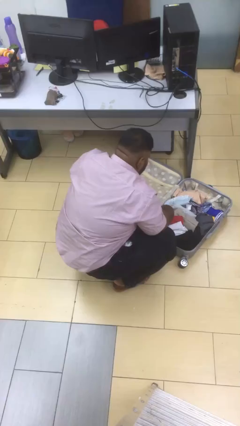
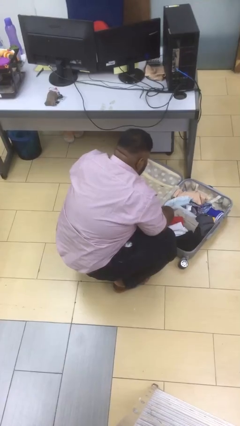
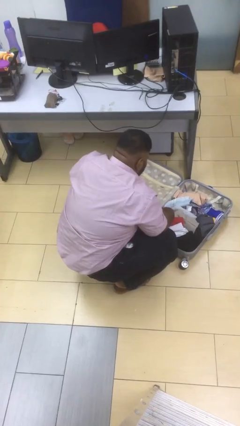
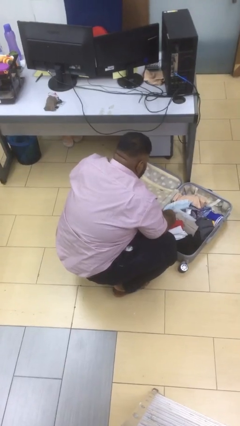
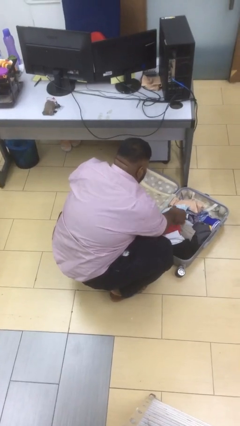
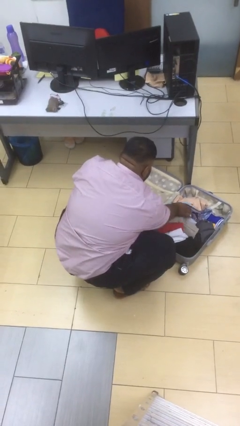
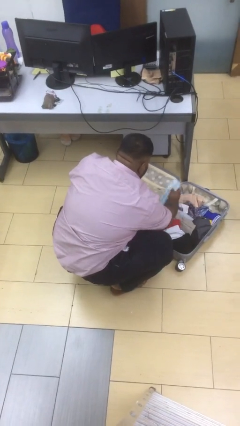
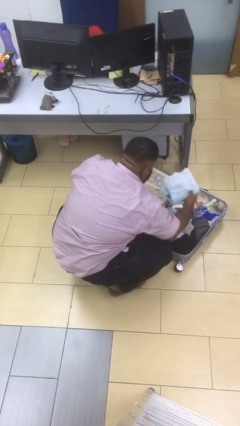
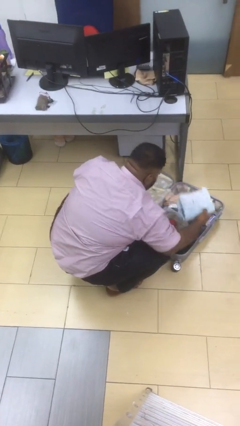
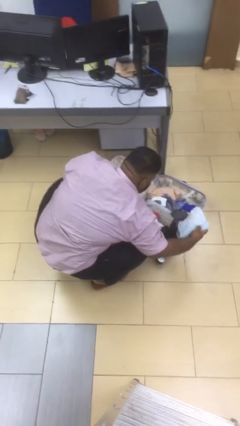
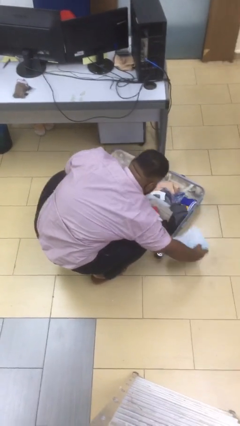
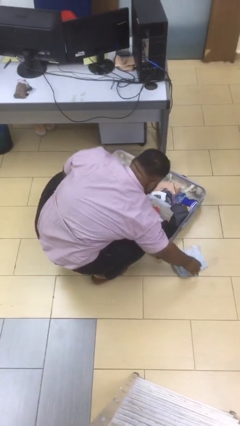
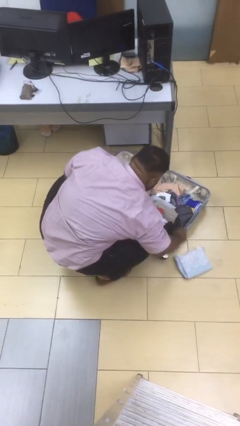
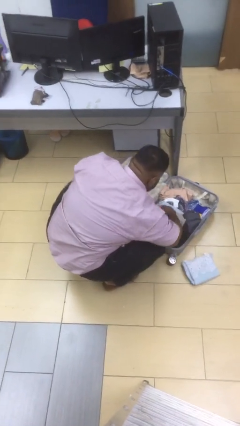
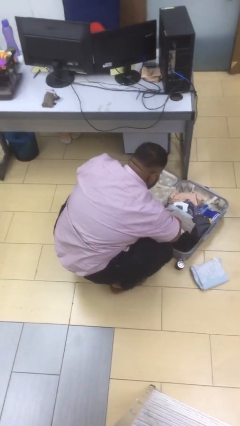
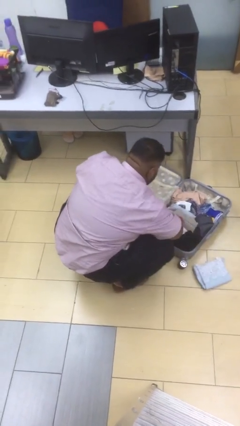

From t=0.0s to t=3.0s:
person unloads clothes from suitcase

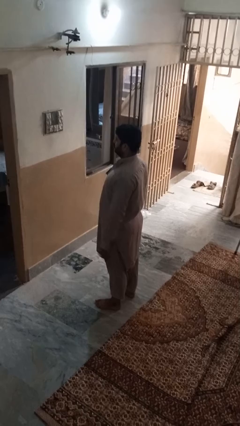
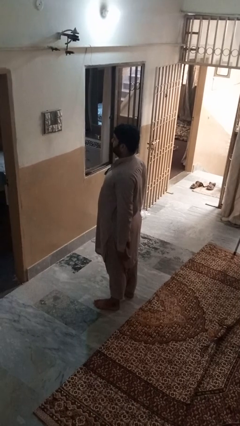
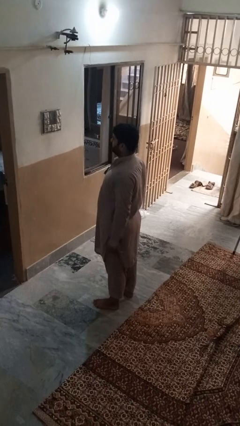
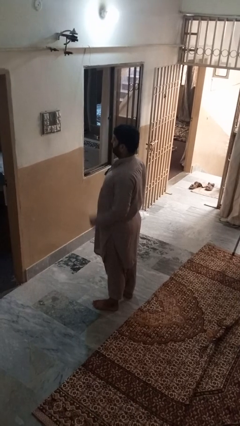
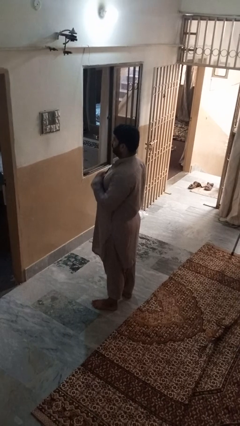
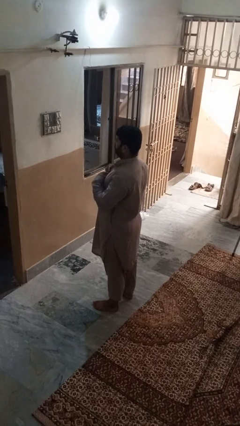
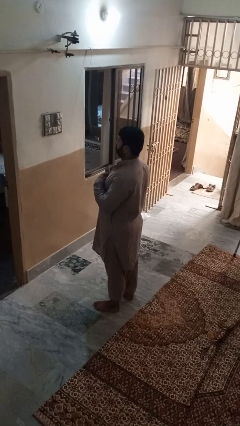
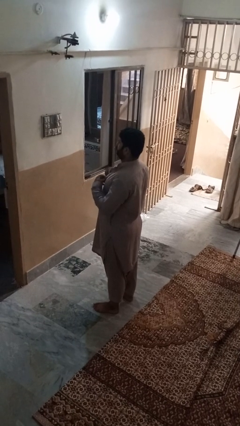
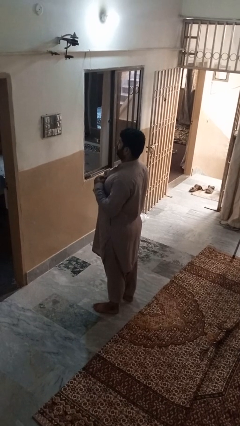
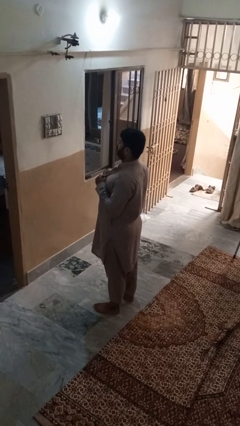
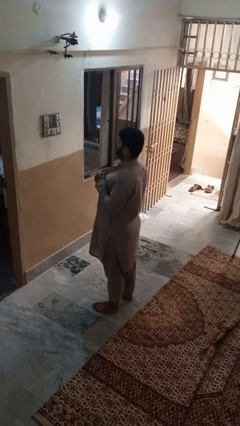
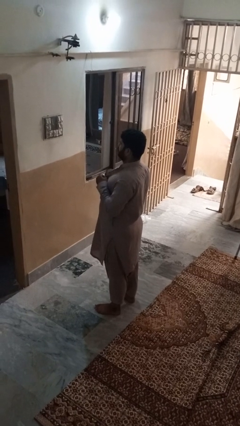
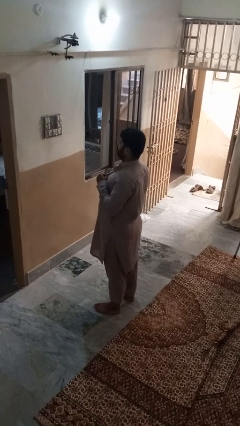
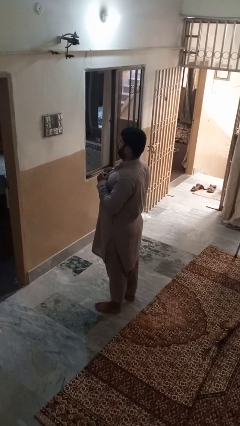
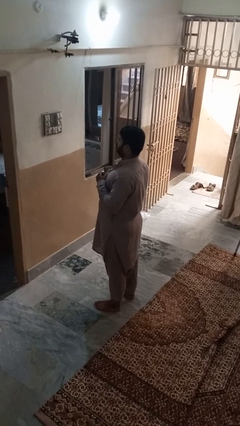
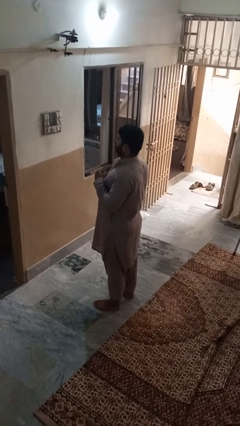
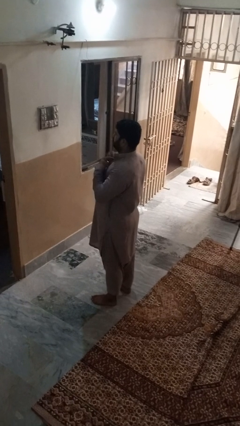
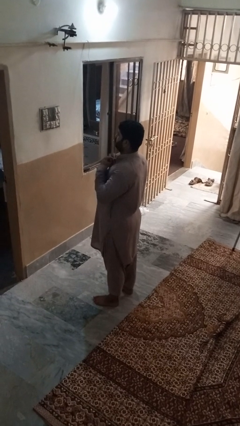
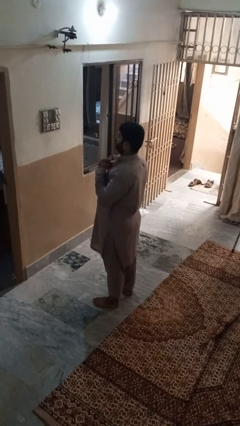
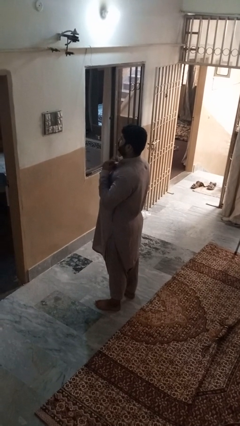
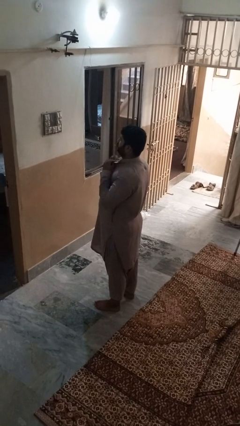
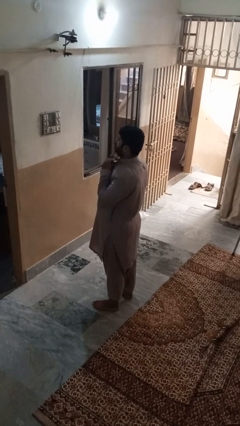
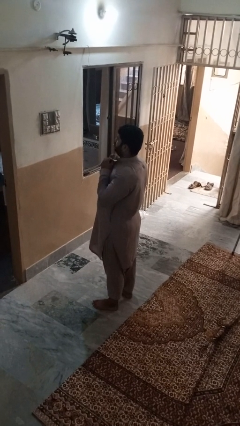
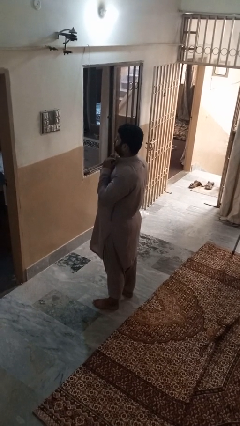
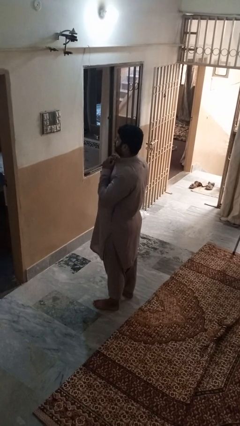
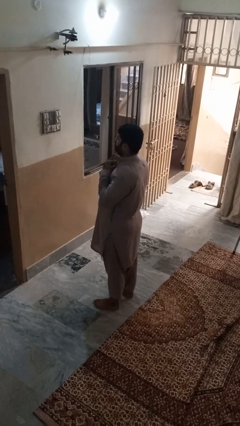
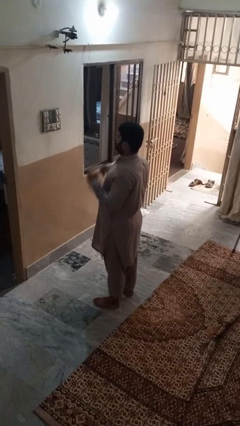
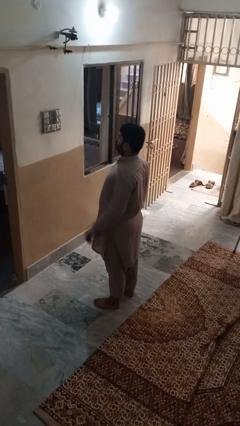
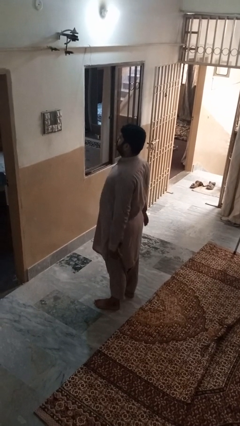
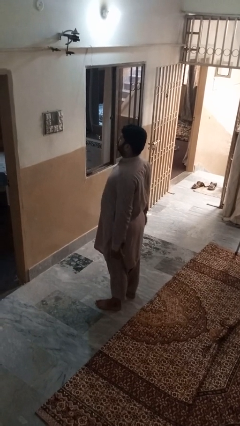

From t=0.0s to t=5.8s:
person buttons shirt

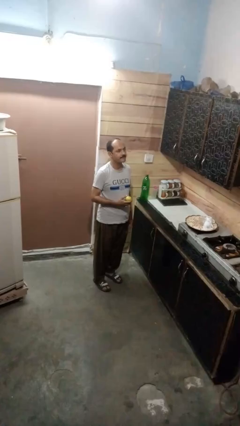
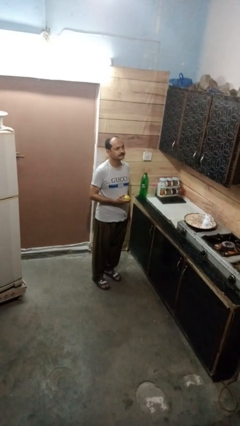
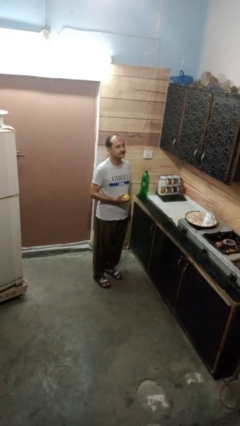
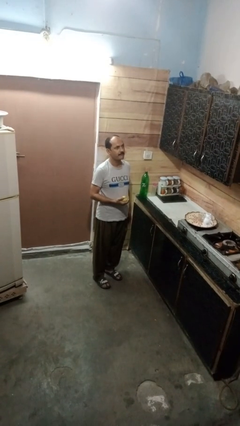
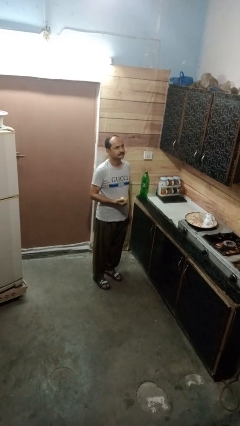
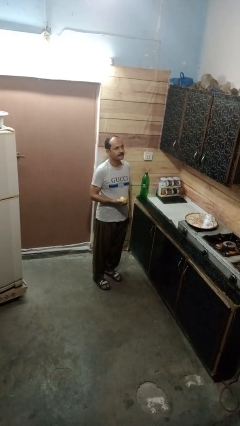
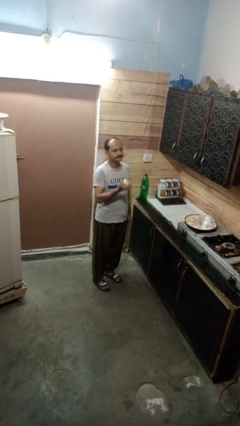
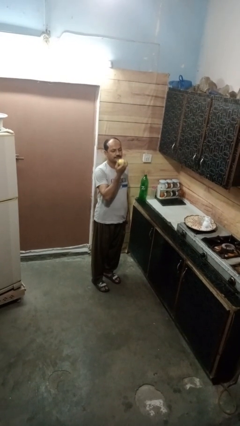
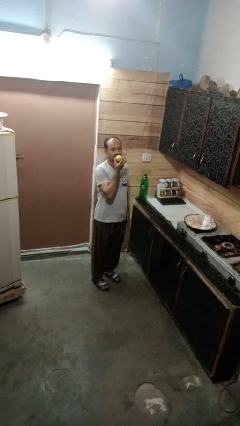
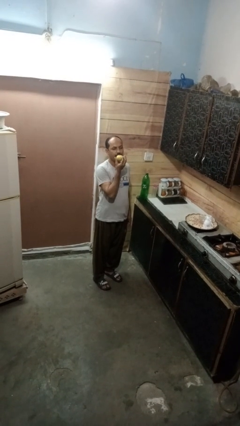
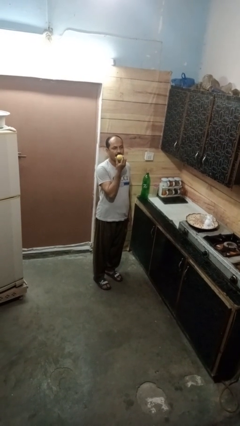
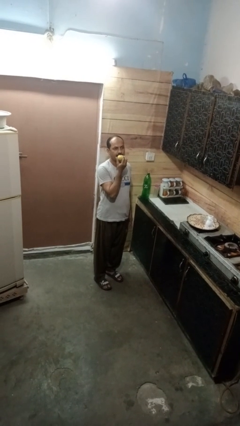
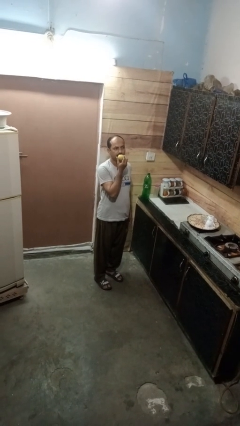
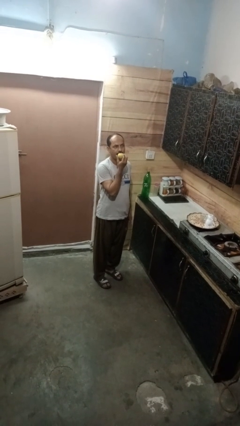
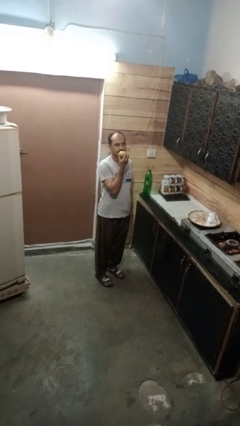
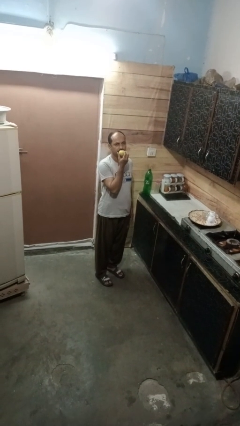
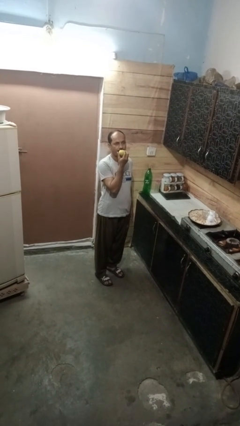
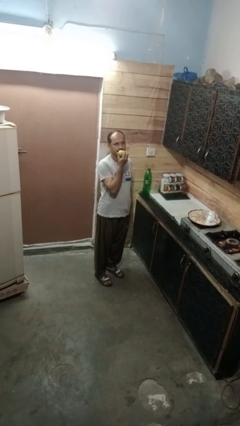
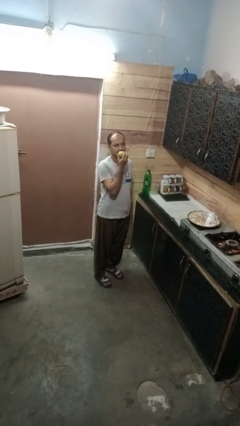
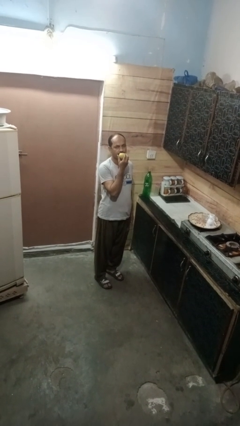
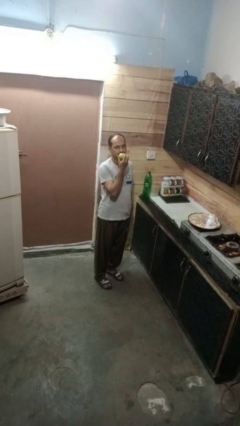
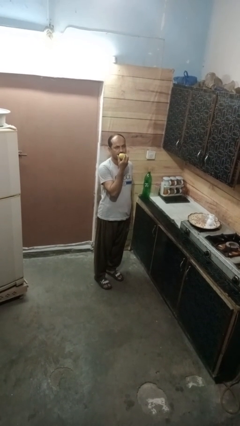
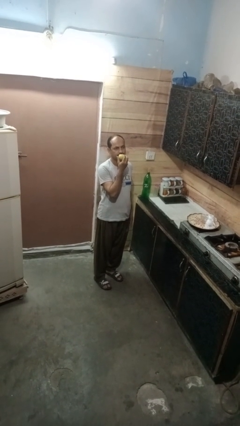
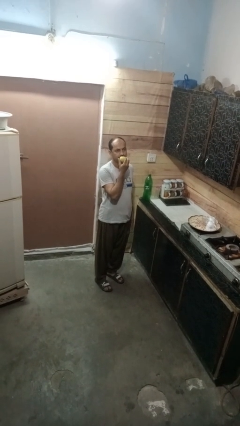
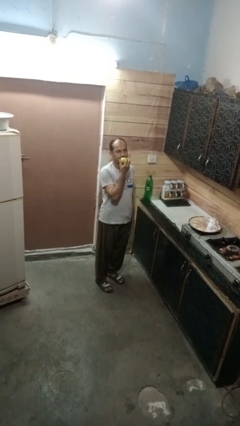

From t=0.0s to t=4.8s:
person eats apple

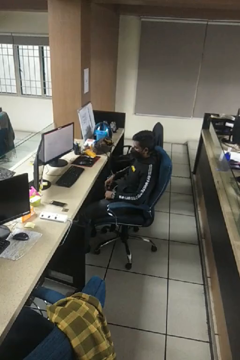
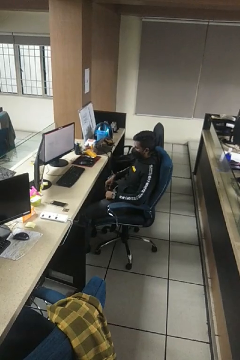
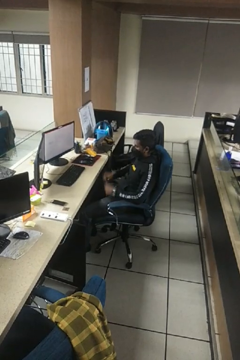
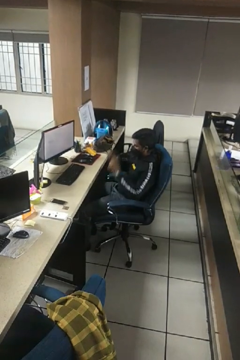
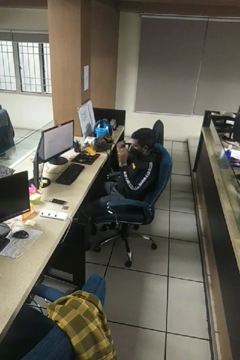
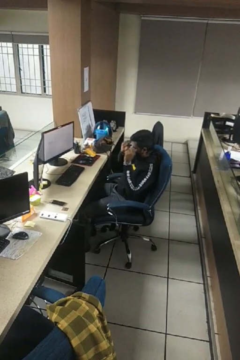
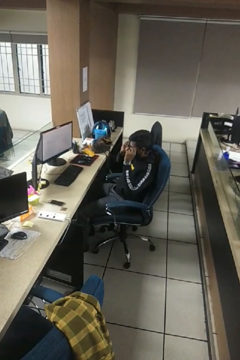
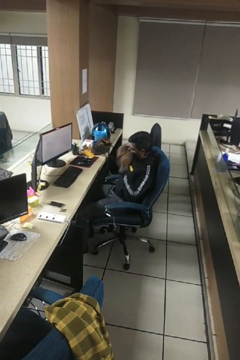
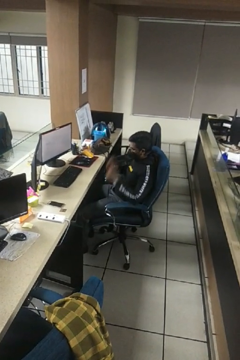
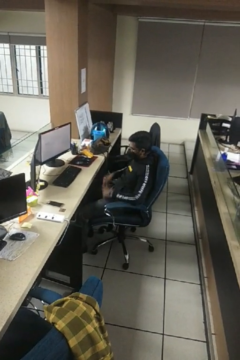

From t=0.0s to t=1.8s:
person puts on glasses

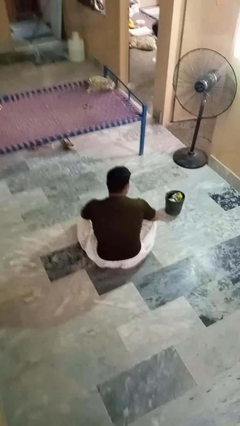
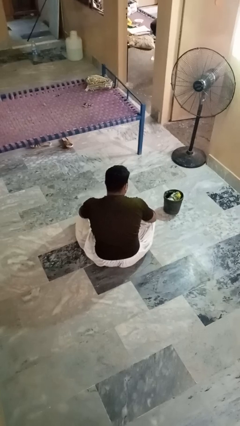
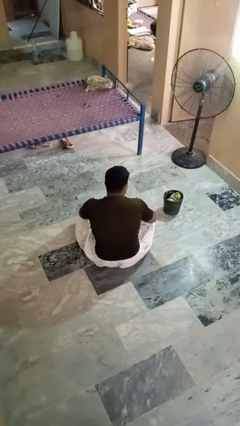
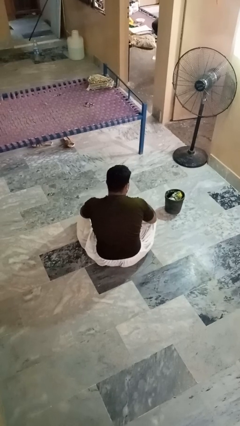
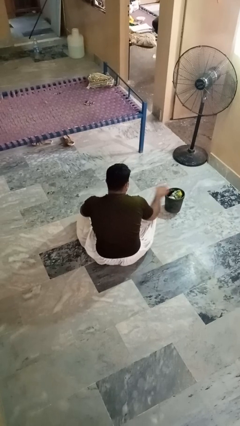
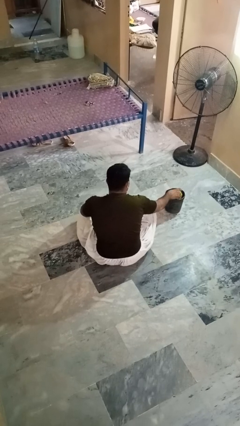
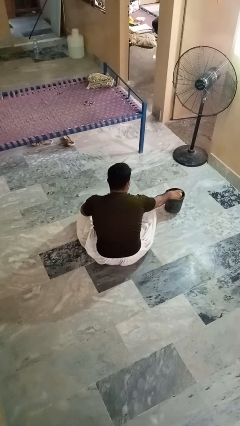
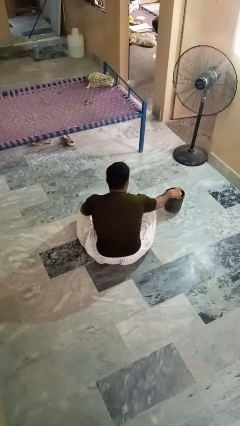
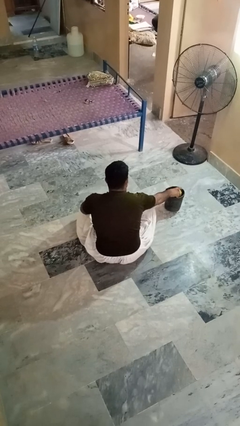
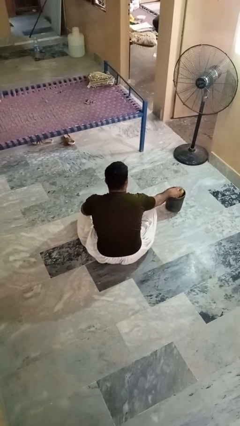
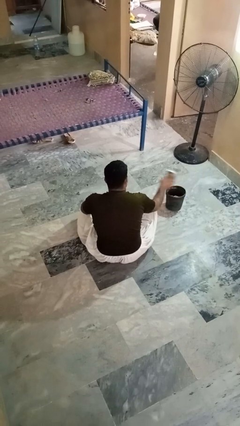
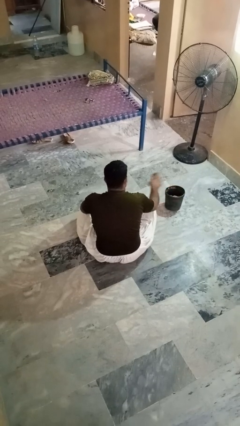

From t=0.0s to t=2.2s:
person takes object from basket

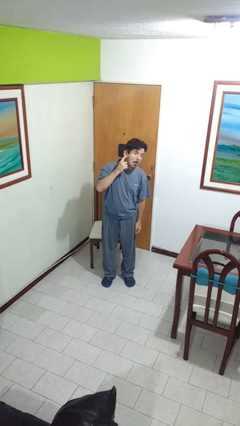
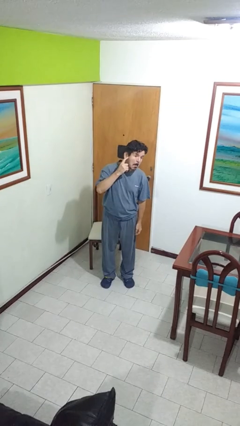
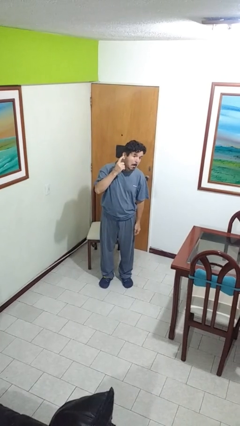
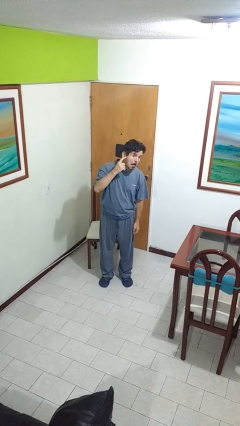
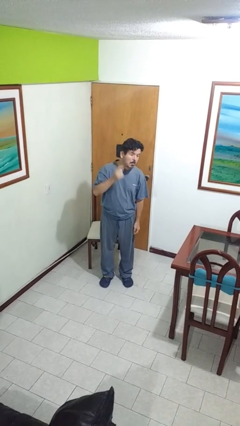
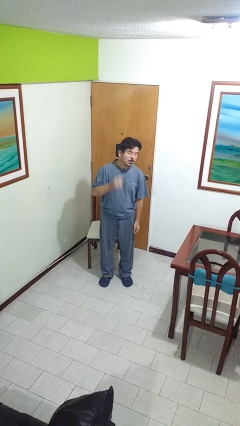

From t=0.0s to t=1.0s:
person gestures listen closely
